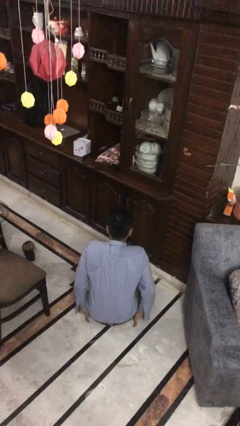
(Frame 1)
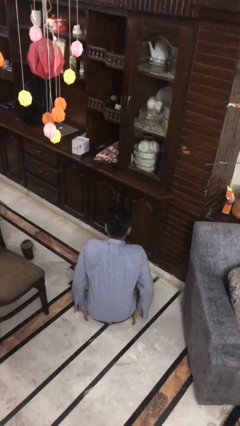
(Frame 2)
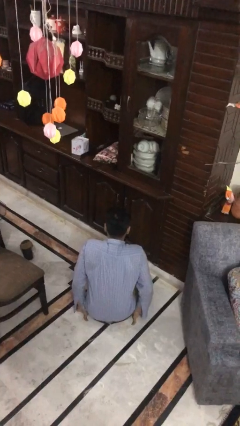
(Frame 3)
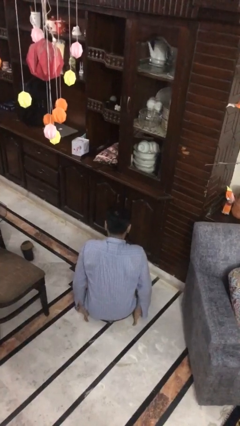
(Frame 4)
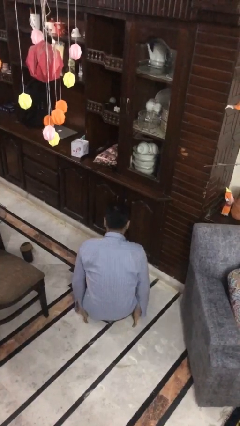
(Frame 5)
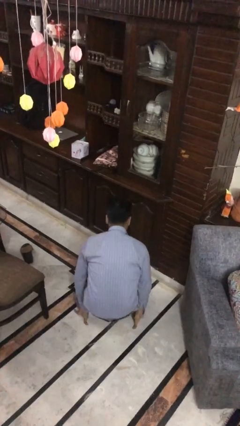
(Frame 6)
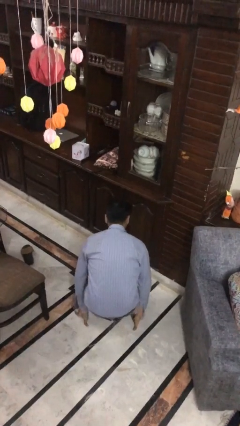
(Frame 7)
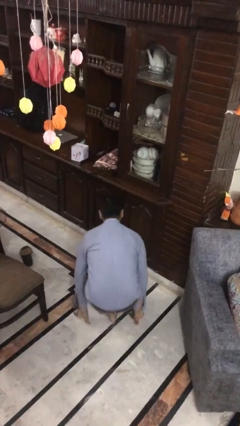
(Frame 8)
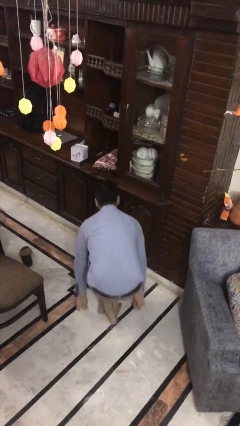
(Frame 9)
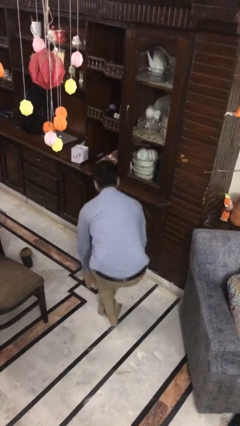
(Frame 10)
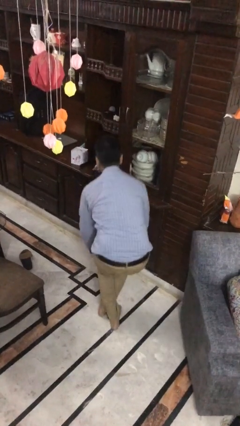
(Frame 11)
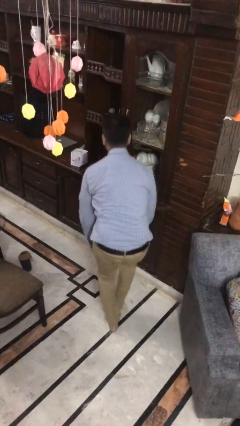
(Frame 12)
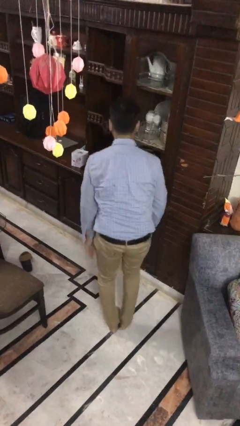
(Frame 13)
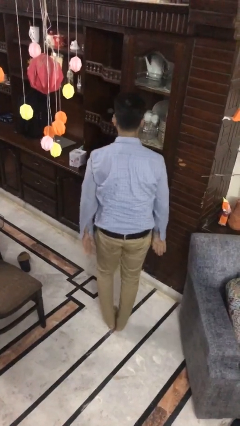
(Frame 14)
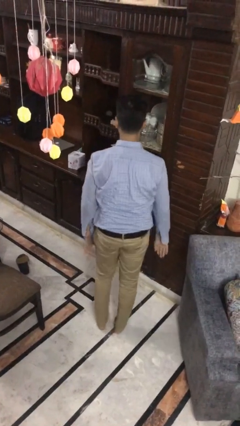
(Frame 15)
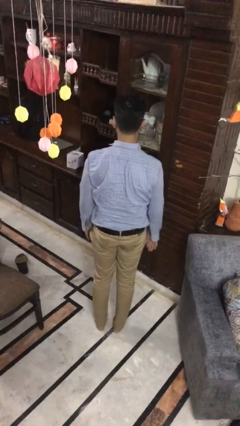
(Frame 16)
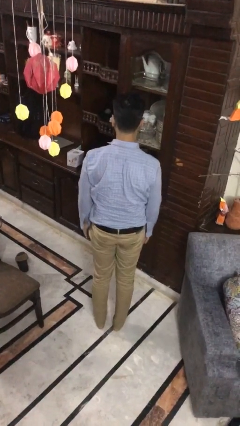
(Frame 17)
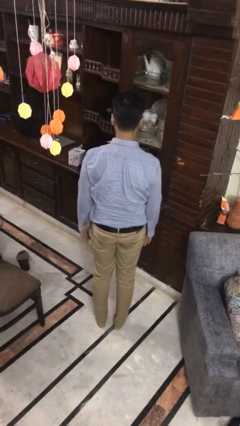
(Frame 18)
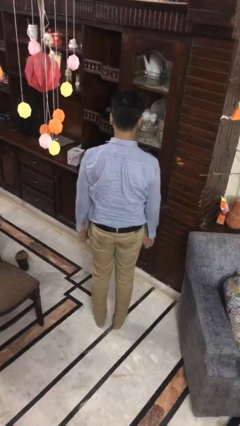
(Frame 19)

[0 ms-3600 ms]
person stands up from floor

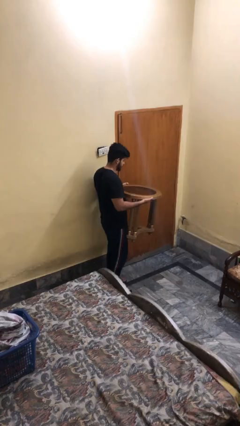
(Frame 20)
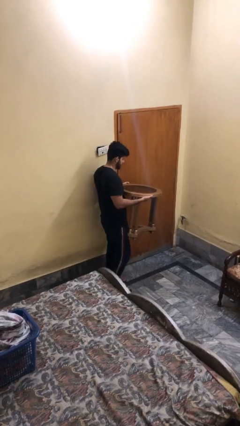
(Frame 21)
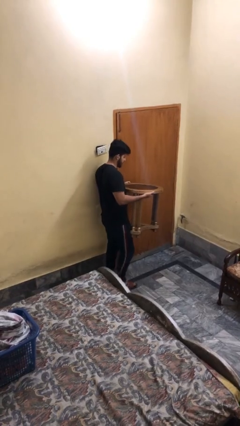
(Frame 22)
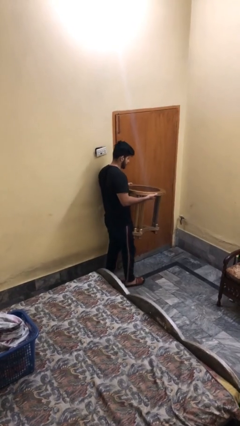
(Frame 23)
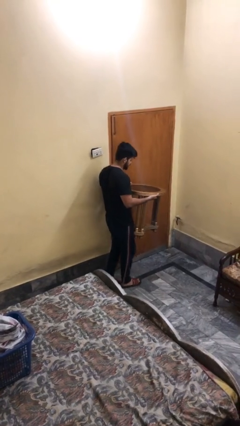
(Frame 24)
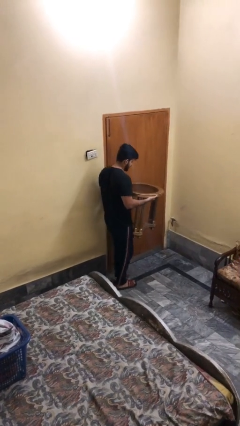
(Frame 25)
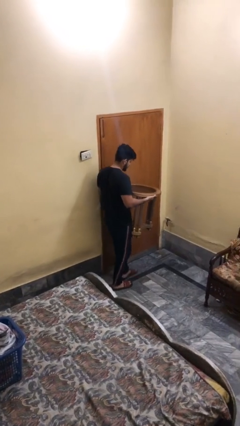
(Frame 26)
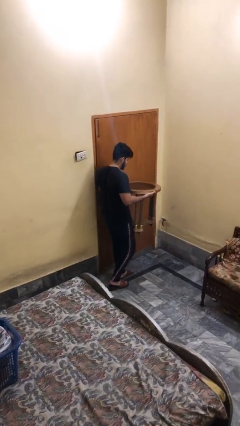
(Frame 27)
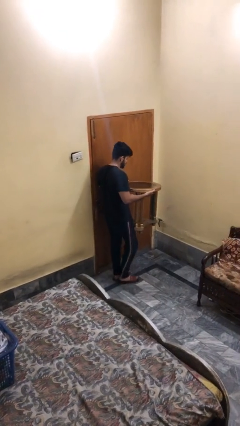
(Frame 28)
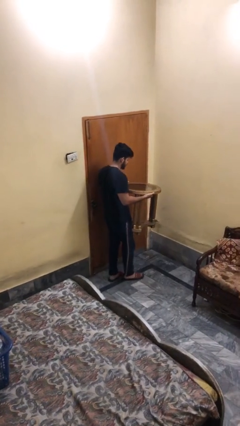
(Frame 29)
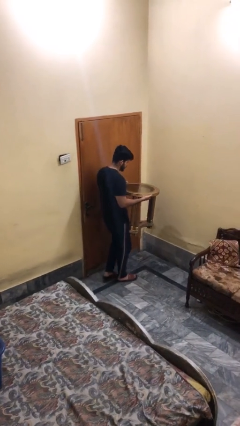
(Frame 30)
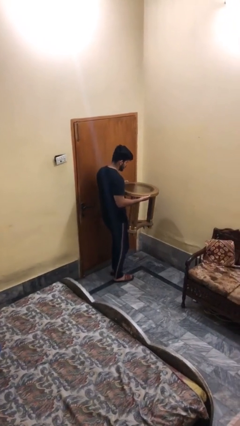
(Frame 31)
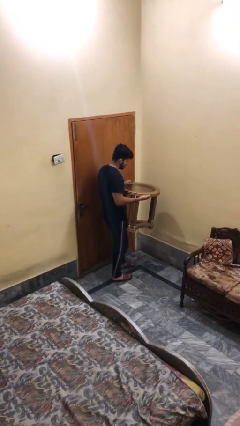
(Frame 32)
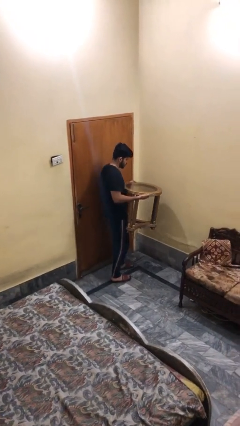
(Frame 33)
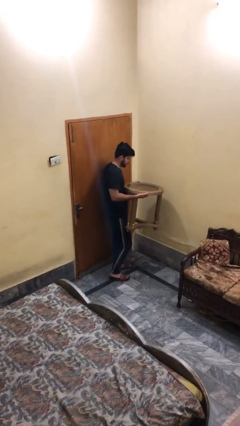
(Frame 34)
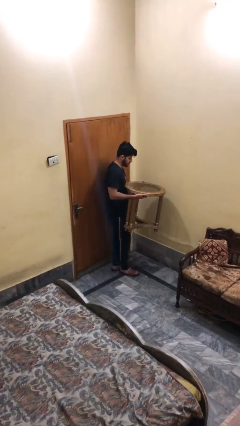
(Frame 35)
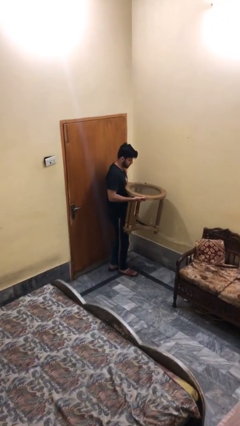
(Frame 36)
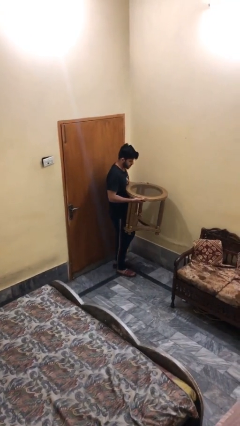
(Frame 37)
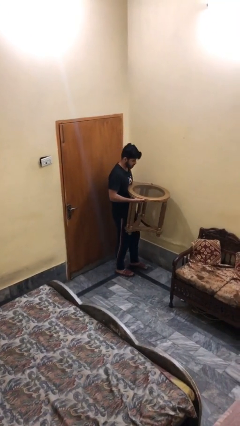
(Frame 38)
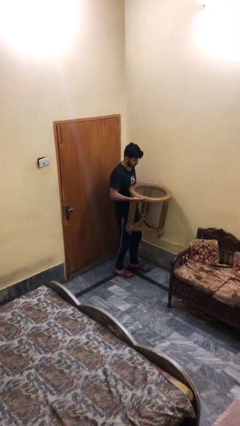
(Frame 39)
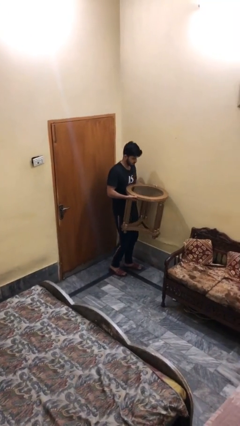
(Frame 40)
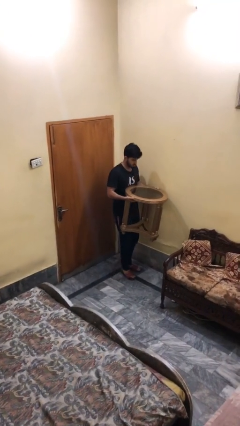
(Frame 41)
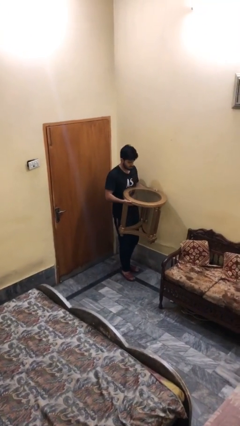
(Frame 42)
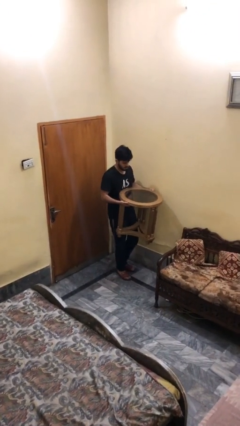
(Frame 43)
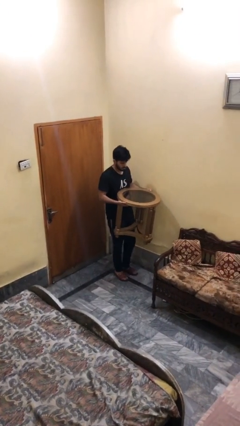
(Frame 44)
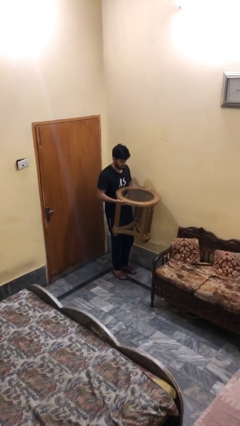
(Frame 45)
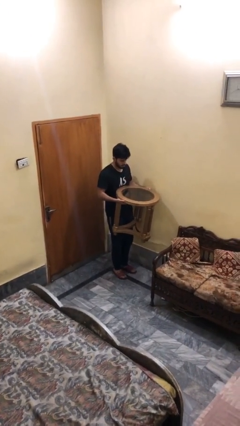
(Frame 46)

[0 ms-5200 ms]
person carries furniture

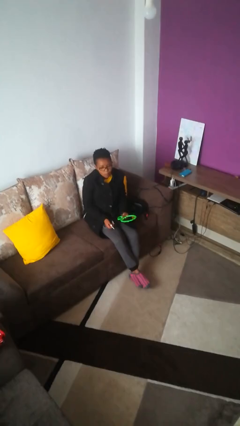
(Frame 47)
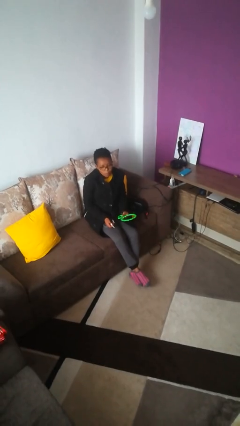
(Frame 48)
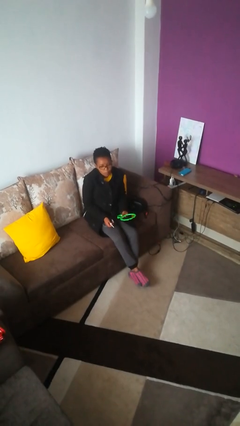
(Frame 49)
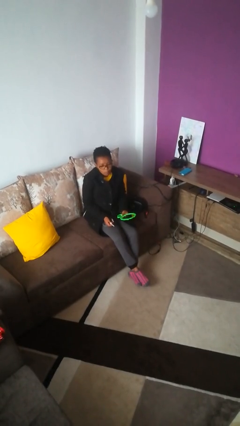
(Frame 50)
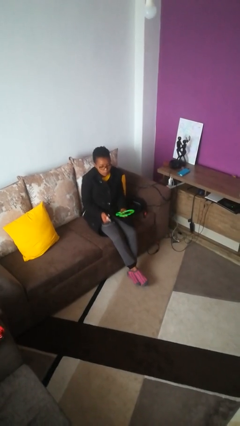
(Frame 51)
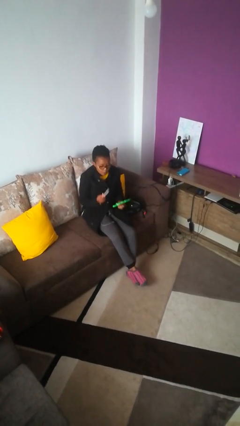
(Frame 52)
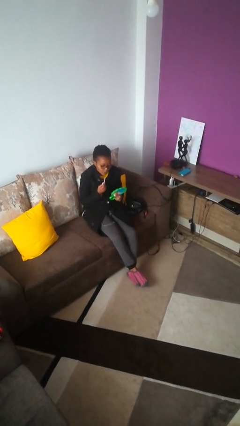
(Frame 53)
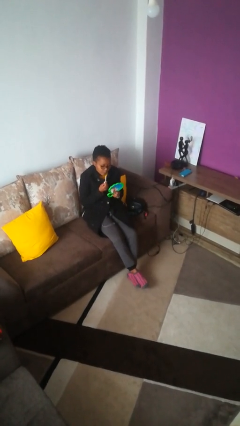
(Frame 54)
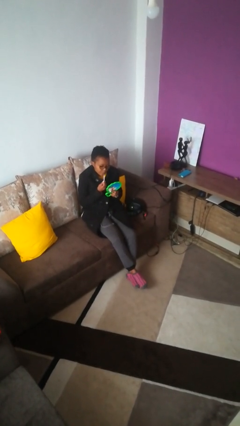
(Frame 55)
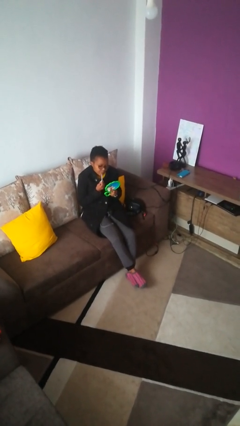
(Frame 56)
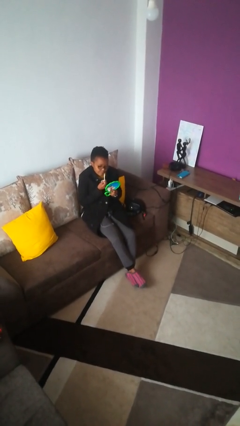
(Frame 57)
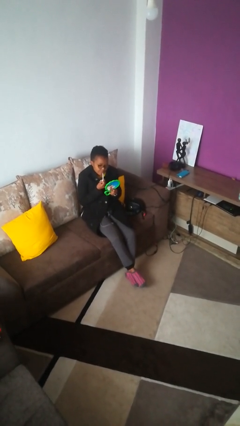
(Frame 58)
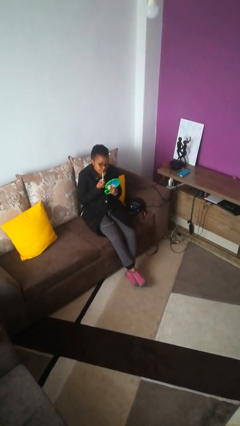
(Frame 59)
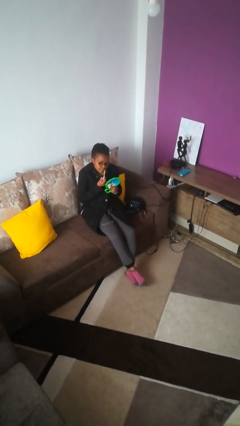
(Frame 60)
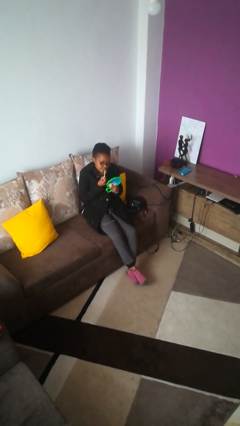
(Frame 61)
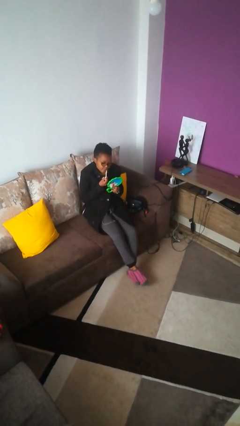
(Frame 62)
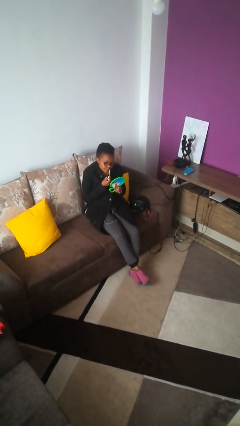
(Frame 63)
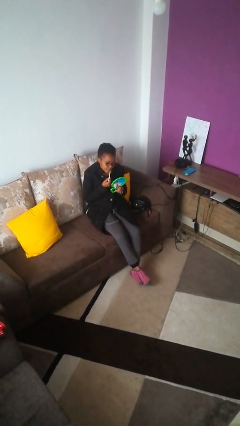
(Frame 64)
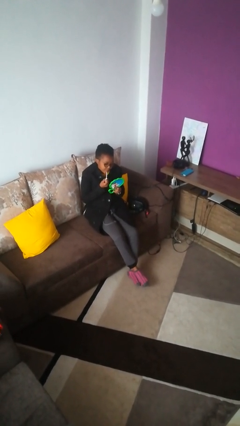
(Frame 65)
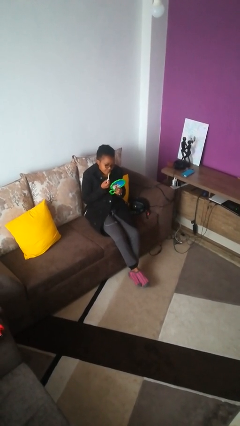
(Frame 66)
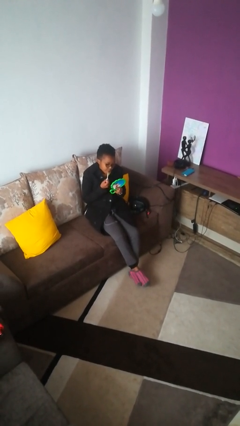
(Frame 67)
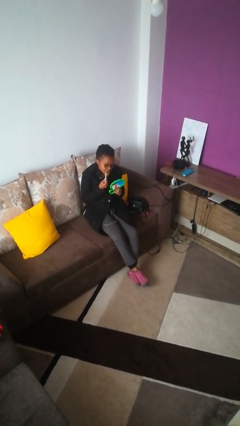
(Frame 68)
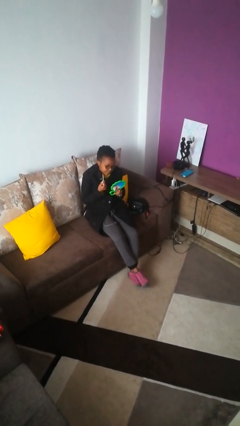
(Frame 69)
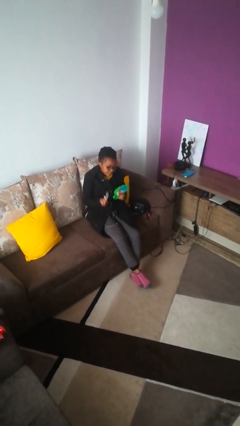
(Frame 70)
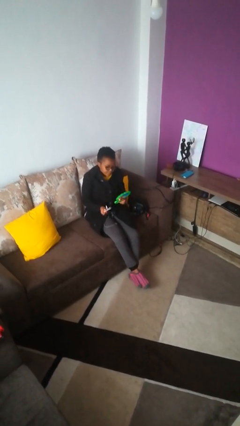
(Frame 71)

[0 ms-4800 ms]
person applies lip makeup

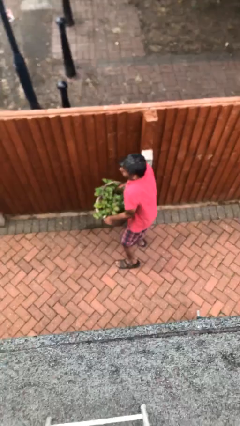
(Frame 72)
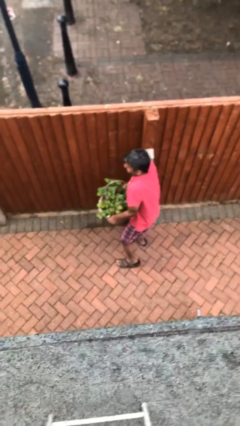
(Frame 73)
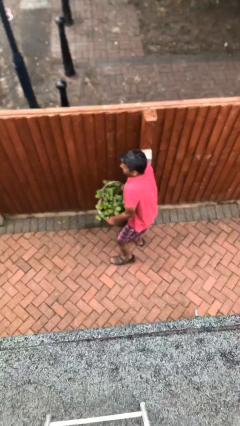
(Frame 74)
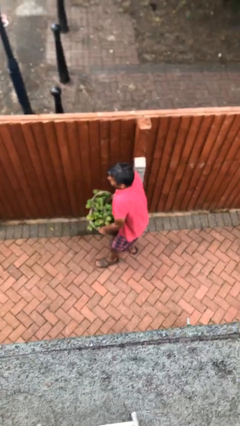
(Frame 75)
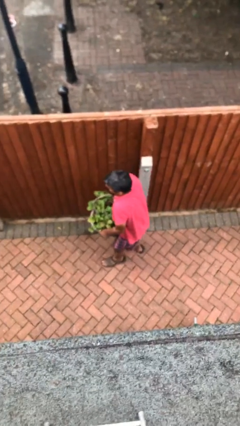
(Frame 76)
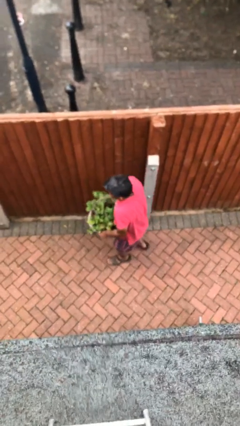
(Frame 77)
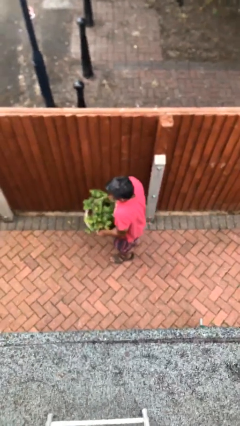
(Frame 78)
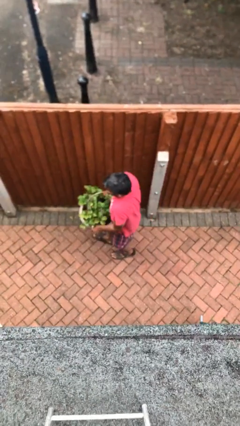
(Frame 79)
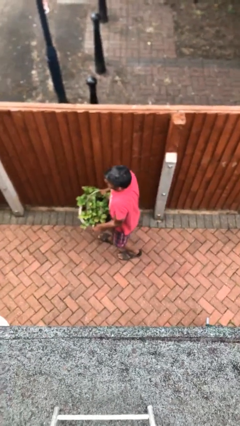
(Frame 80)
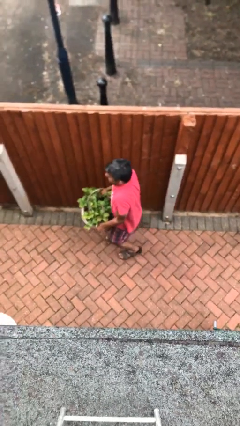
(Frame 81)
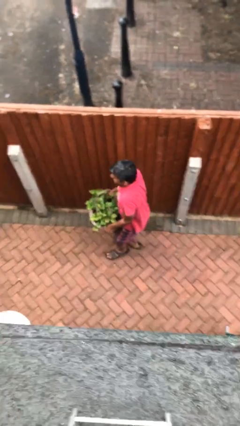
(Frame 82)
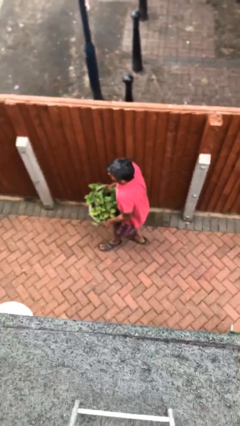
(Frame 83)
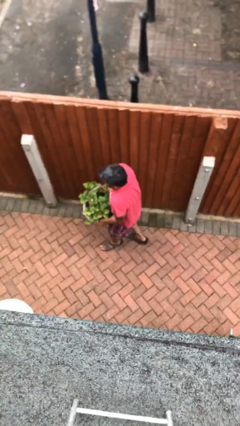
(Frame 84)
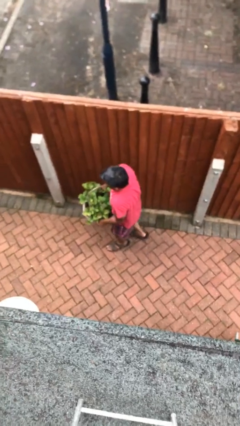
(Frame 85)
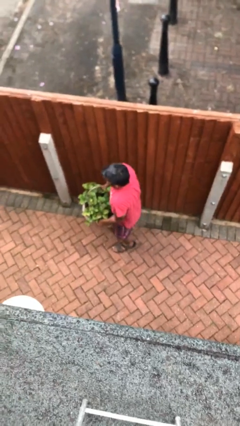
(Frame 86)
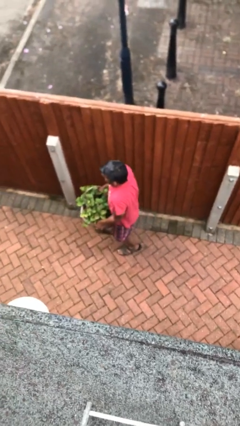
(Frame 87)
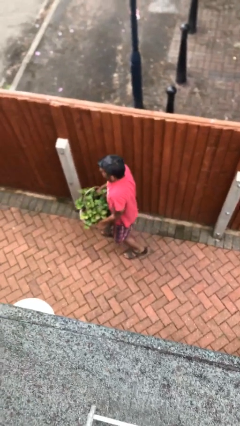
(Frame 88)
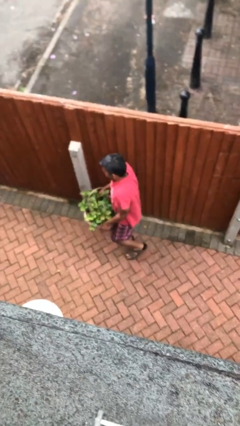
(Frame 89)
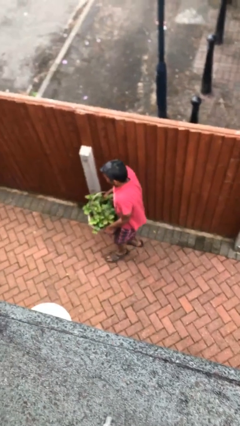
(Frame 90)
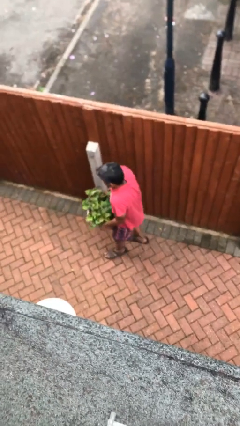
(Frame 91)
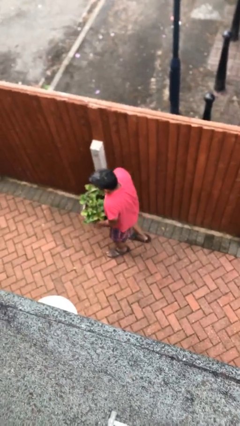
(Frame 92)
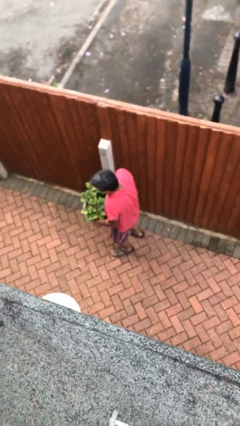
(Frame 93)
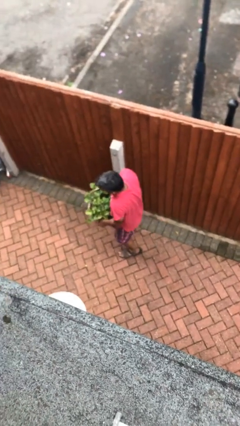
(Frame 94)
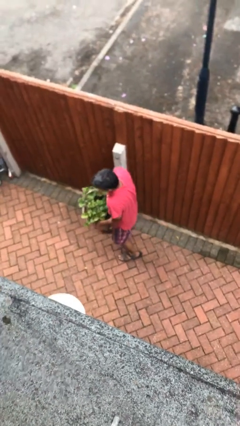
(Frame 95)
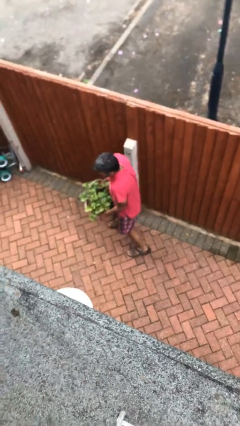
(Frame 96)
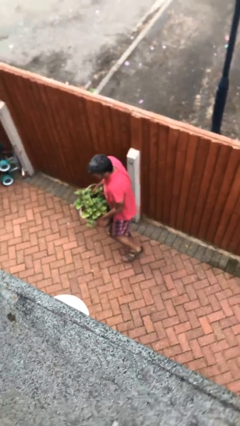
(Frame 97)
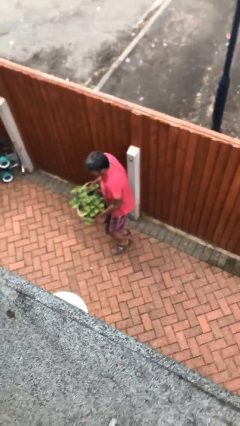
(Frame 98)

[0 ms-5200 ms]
person carries heavy object
